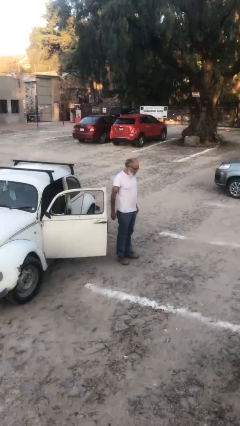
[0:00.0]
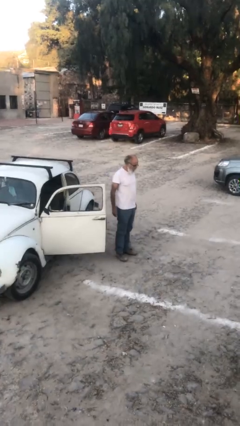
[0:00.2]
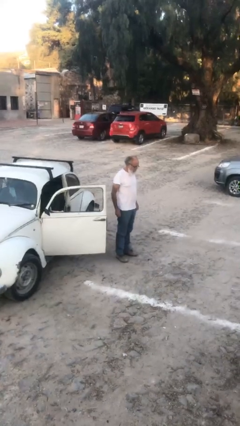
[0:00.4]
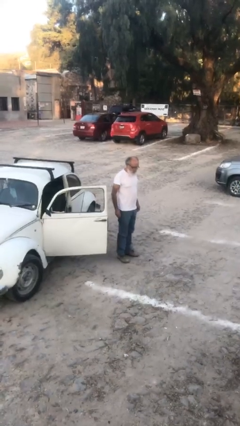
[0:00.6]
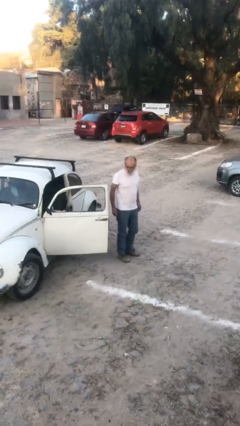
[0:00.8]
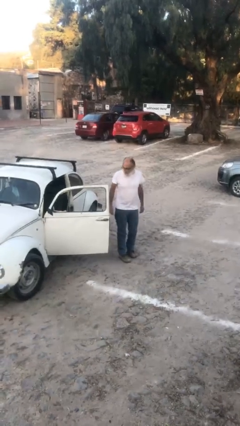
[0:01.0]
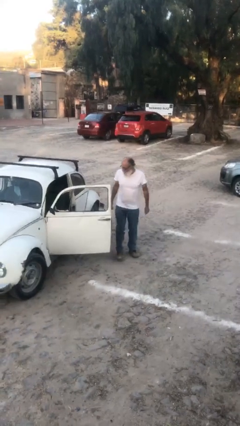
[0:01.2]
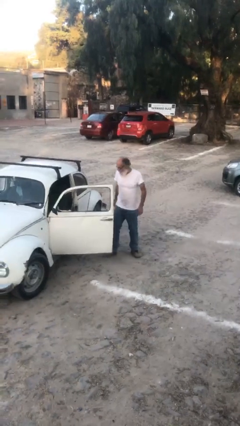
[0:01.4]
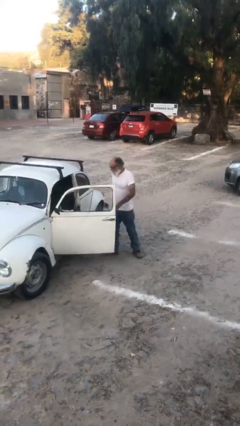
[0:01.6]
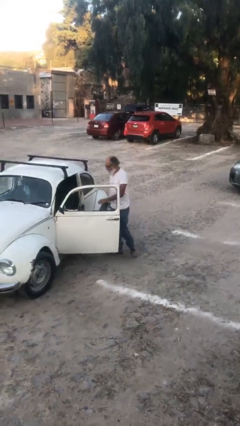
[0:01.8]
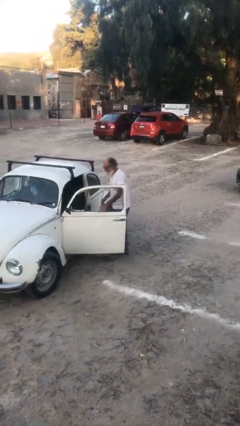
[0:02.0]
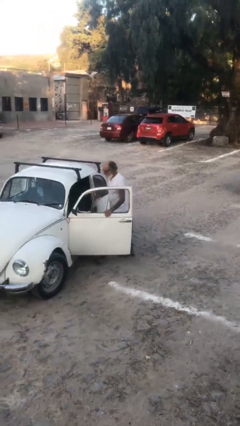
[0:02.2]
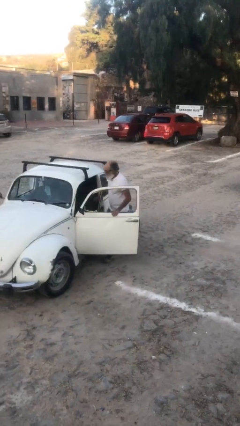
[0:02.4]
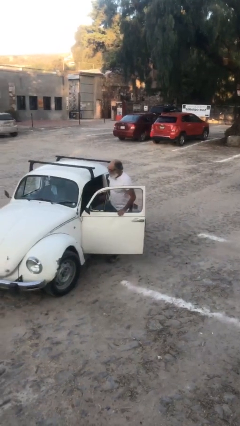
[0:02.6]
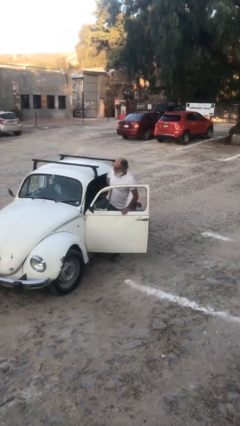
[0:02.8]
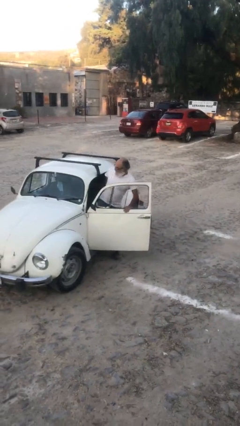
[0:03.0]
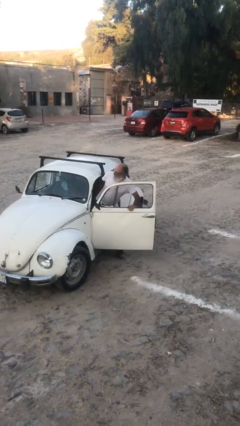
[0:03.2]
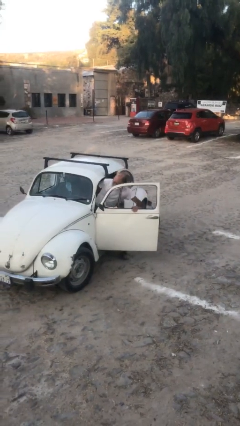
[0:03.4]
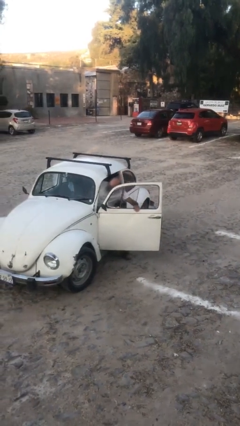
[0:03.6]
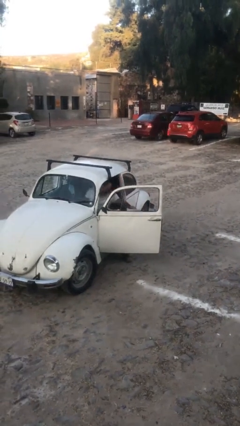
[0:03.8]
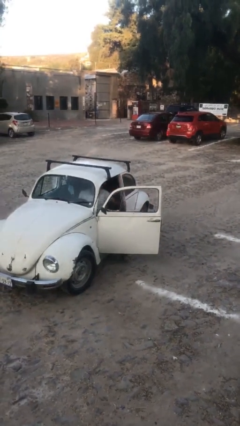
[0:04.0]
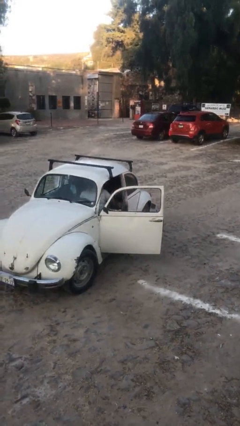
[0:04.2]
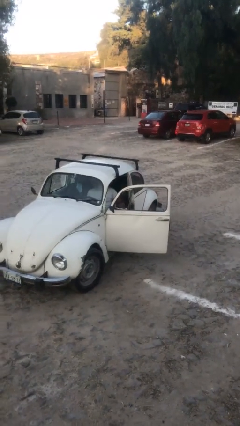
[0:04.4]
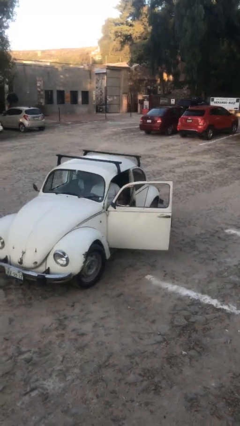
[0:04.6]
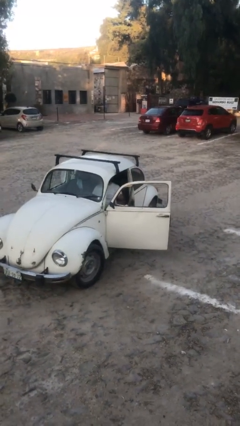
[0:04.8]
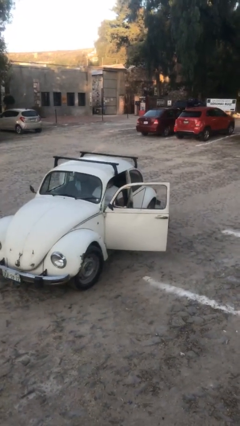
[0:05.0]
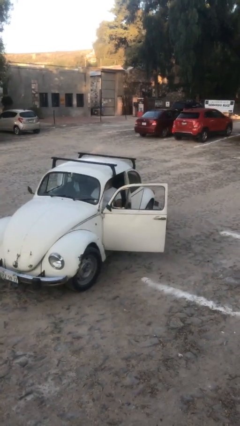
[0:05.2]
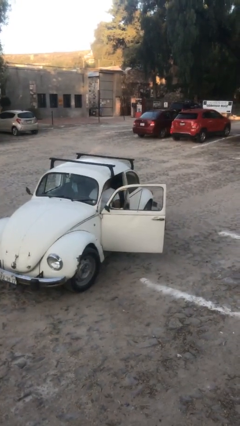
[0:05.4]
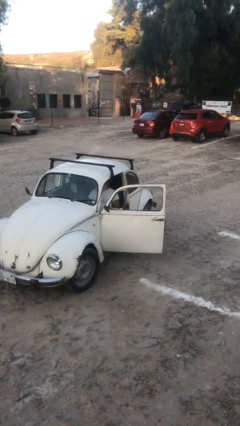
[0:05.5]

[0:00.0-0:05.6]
person enters car

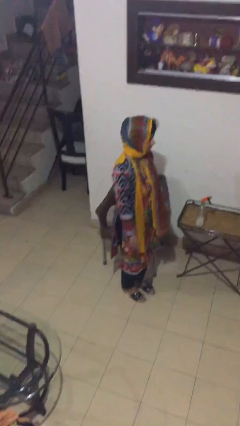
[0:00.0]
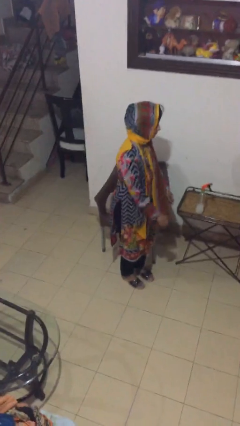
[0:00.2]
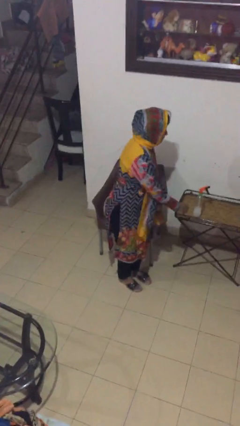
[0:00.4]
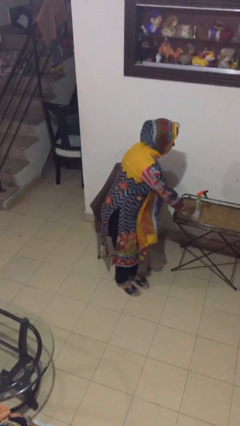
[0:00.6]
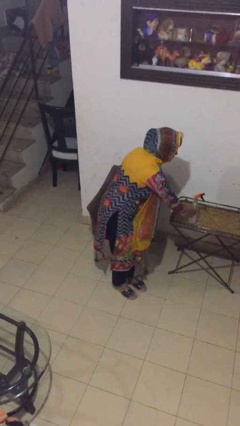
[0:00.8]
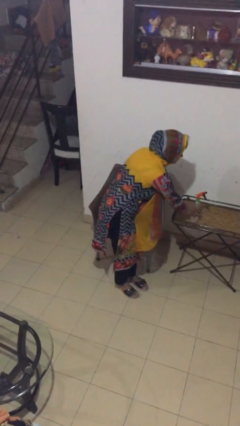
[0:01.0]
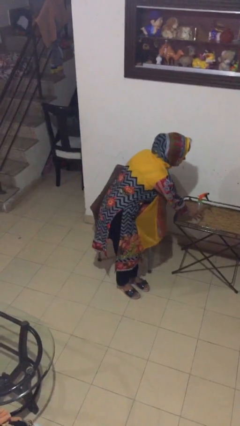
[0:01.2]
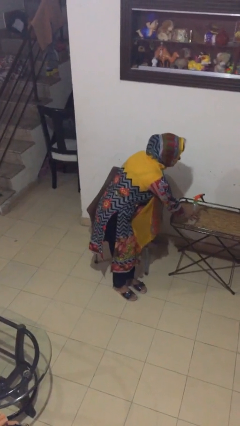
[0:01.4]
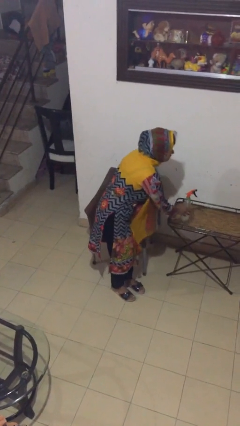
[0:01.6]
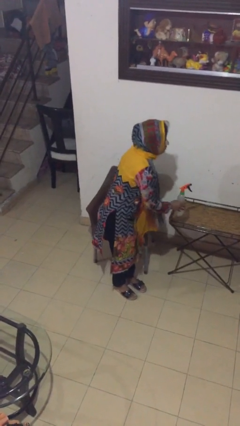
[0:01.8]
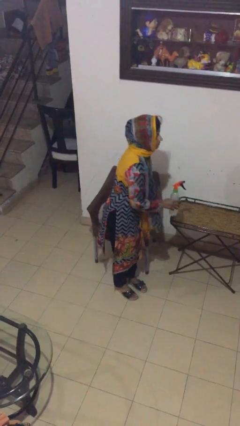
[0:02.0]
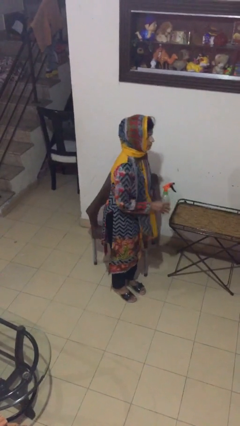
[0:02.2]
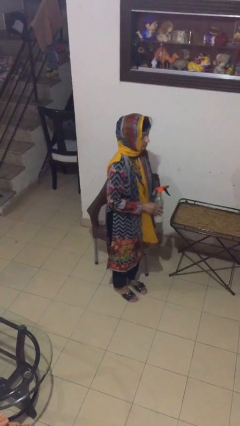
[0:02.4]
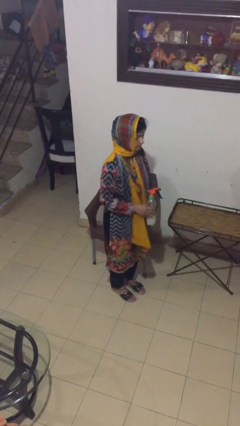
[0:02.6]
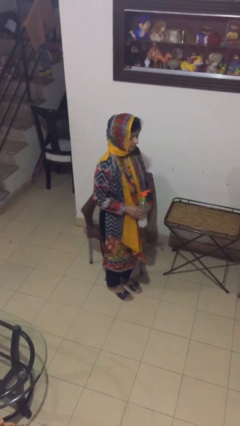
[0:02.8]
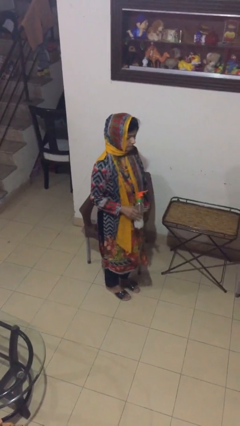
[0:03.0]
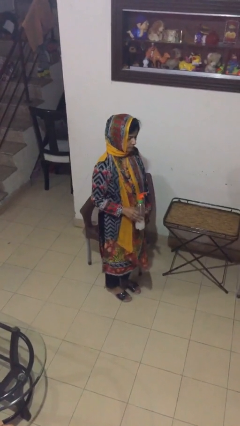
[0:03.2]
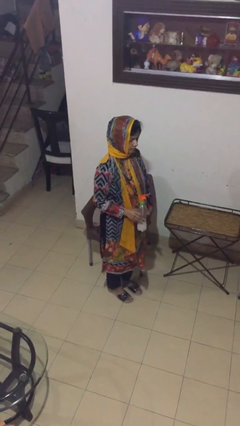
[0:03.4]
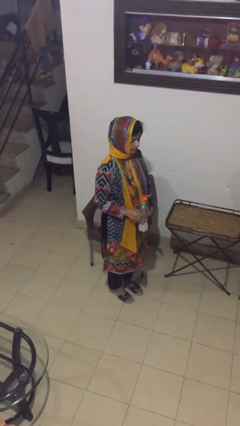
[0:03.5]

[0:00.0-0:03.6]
person picks up object from table

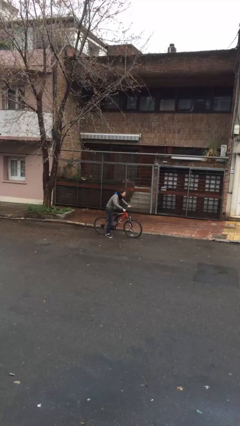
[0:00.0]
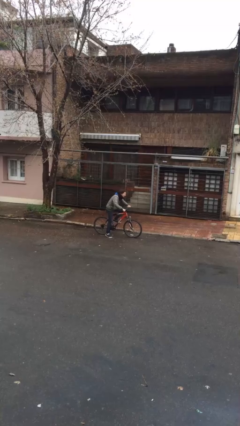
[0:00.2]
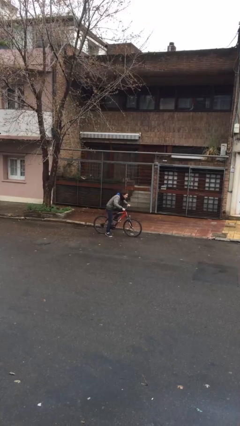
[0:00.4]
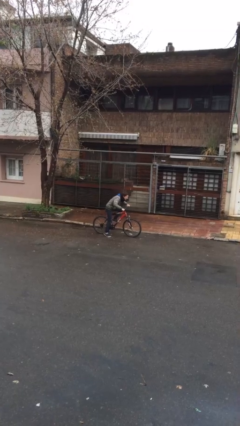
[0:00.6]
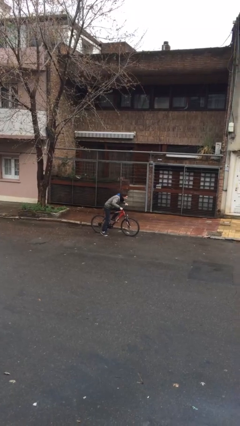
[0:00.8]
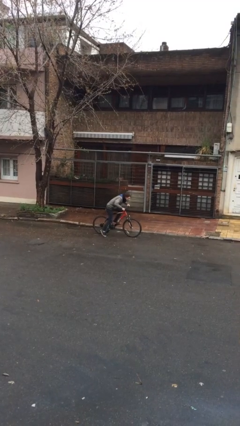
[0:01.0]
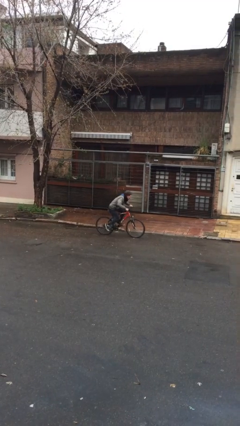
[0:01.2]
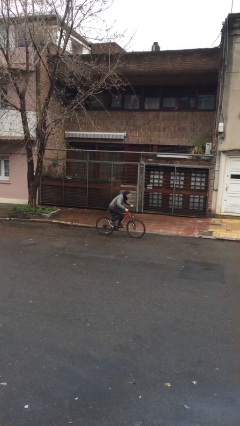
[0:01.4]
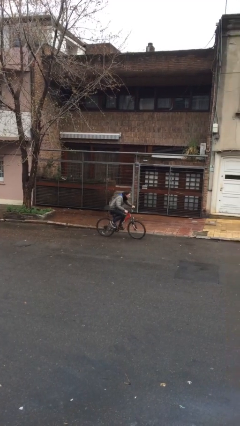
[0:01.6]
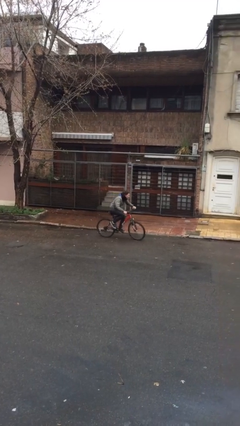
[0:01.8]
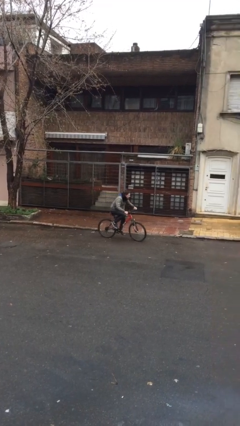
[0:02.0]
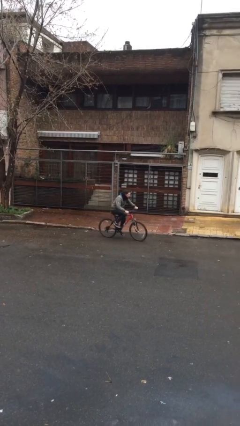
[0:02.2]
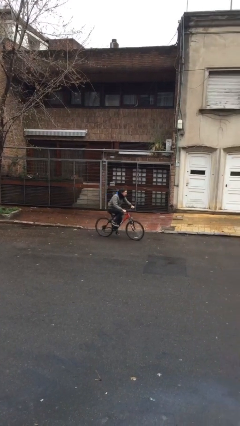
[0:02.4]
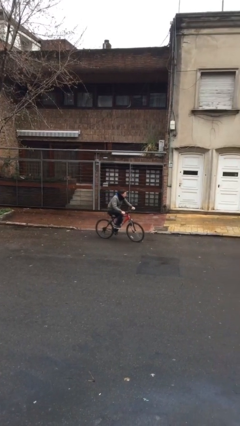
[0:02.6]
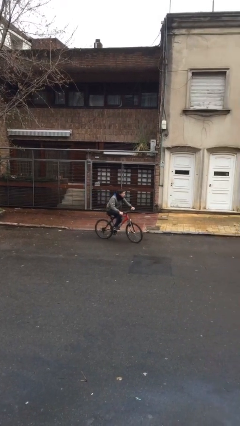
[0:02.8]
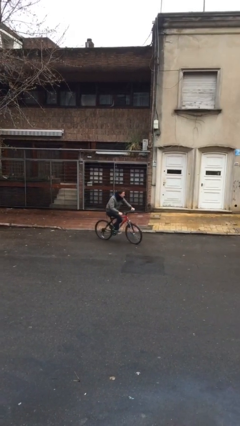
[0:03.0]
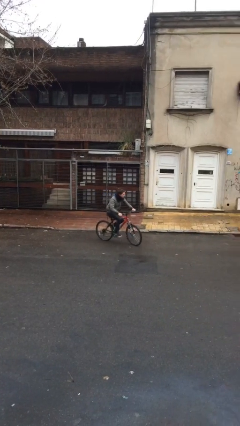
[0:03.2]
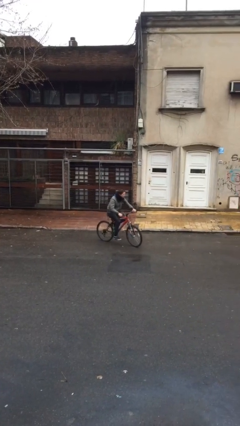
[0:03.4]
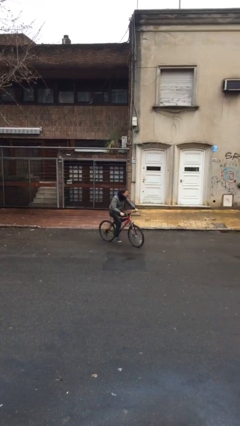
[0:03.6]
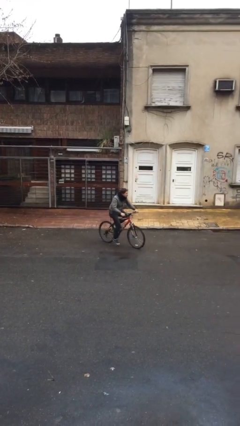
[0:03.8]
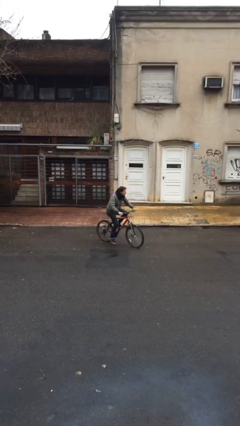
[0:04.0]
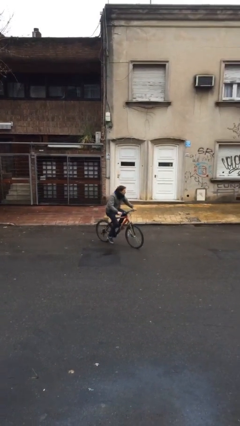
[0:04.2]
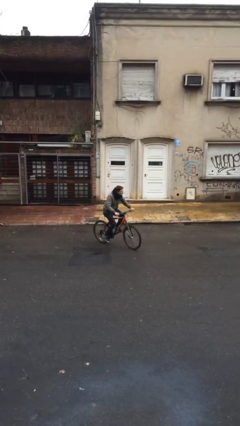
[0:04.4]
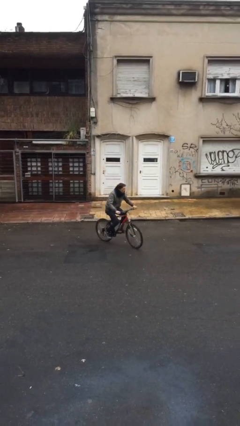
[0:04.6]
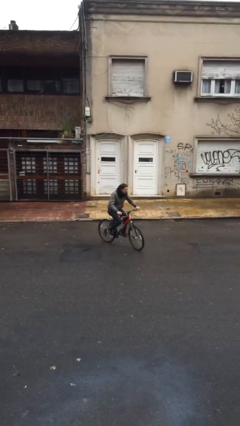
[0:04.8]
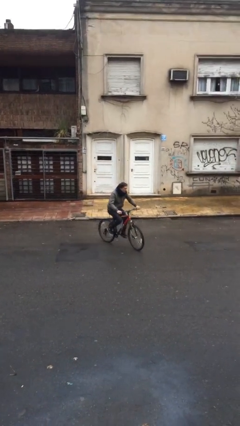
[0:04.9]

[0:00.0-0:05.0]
person rides bicycle

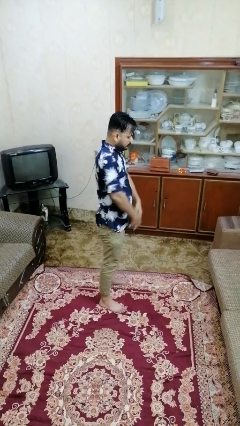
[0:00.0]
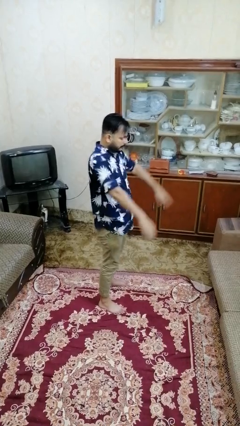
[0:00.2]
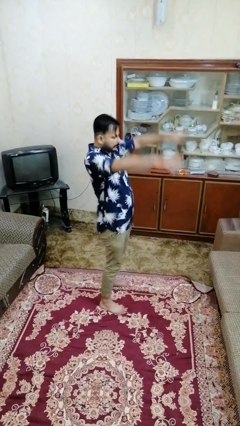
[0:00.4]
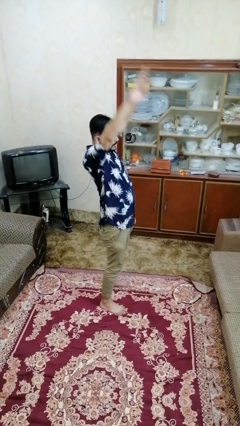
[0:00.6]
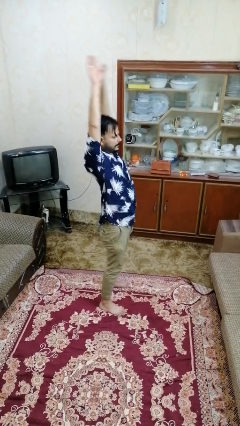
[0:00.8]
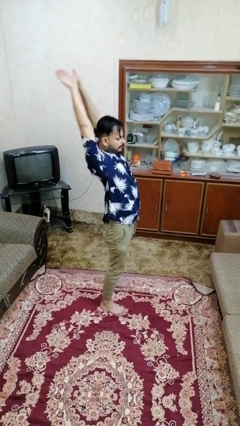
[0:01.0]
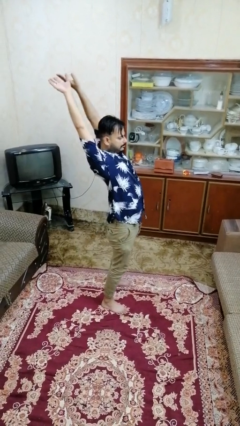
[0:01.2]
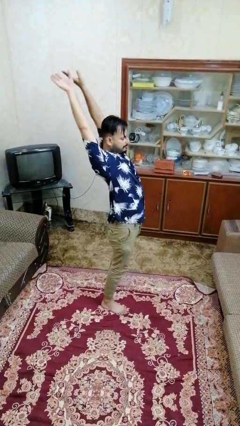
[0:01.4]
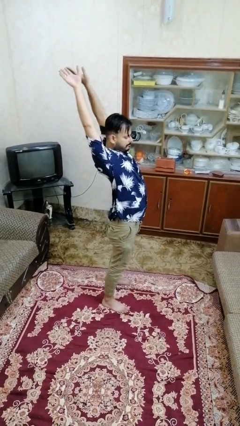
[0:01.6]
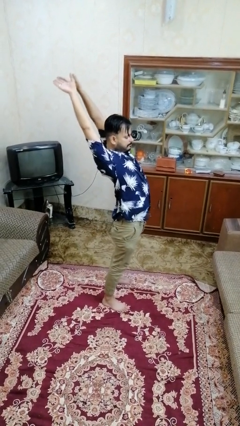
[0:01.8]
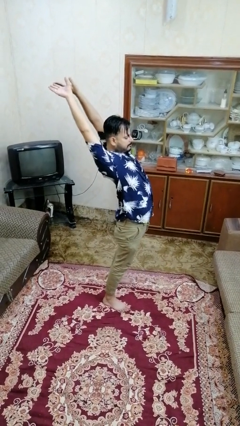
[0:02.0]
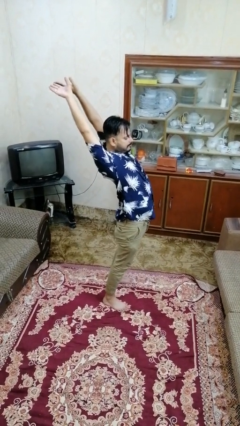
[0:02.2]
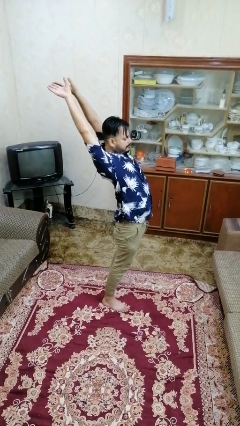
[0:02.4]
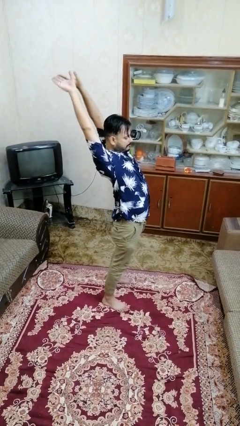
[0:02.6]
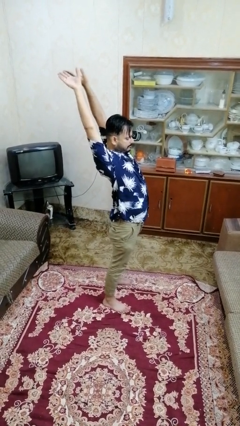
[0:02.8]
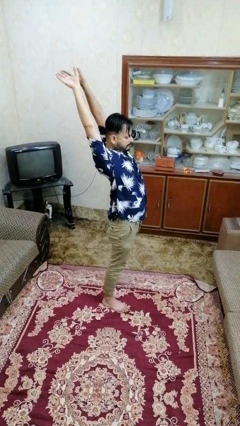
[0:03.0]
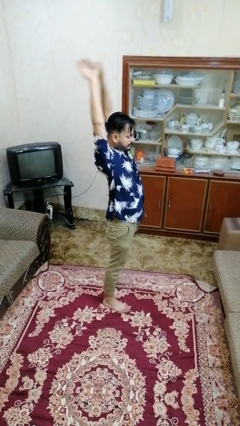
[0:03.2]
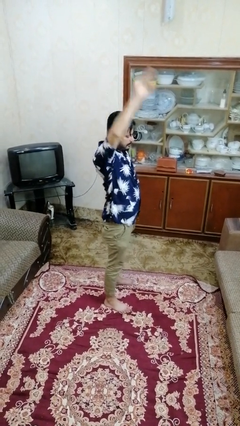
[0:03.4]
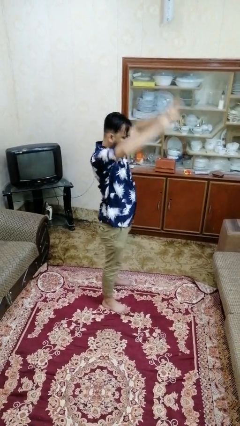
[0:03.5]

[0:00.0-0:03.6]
person stretches arms over head
